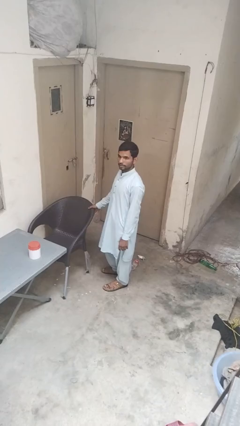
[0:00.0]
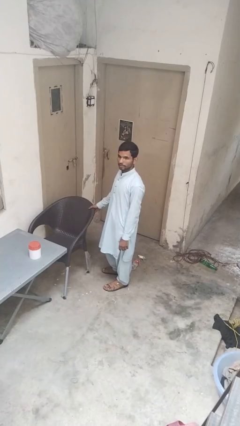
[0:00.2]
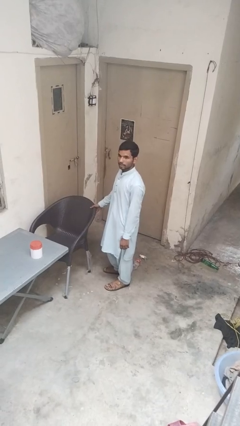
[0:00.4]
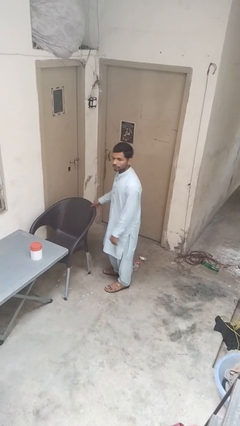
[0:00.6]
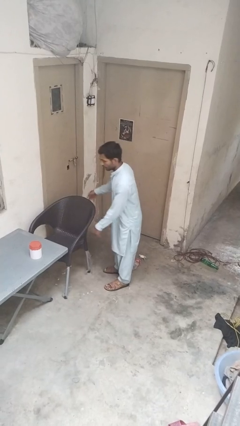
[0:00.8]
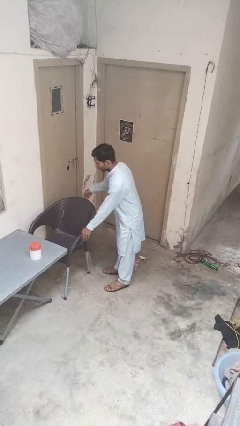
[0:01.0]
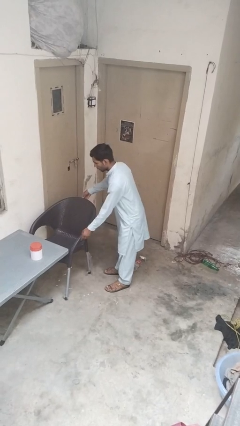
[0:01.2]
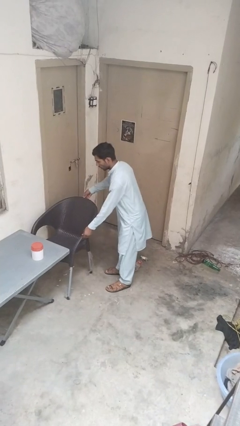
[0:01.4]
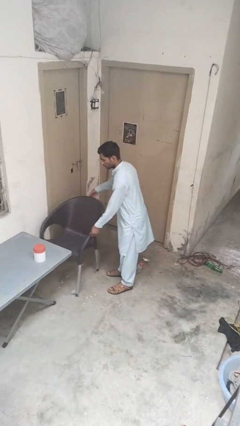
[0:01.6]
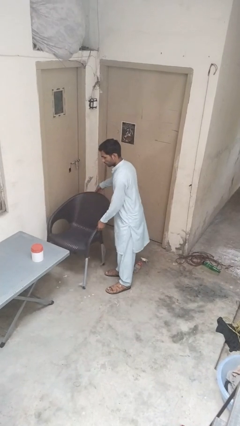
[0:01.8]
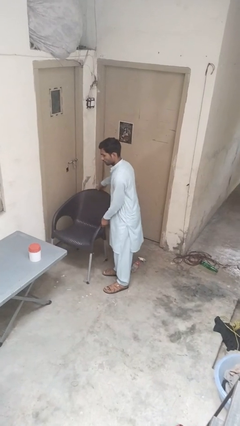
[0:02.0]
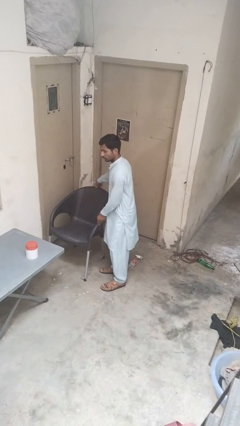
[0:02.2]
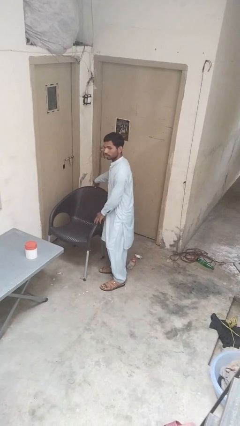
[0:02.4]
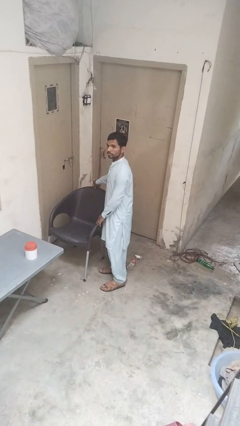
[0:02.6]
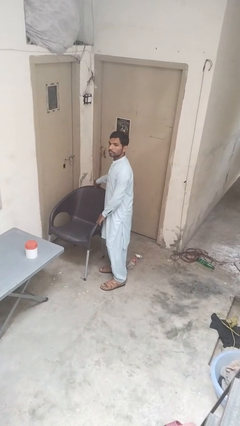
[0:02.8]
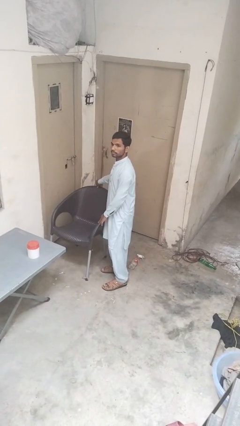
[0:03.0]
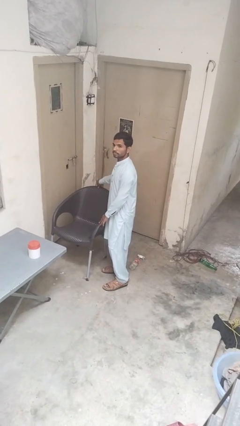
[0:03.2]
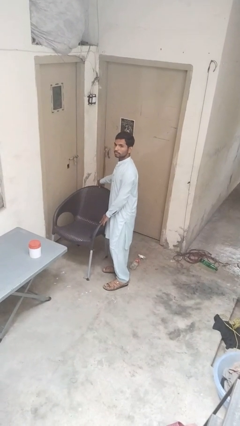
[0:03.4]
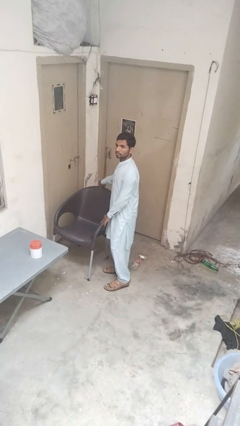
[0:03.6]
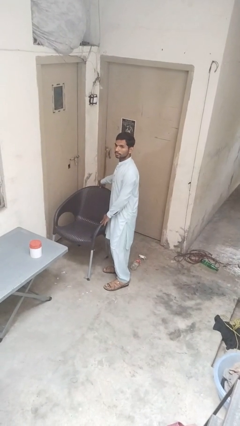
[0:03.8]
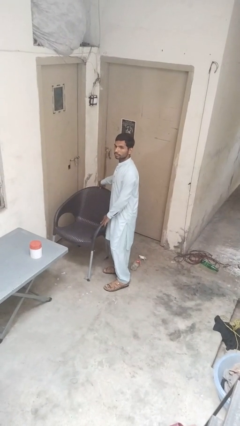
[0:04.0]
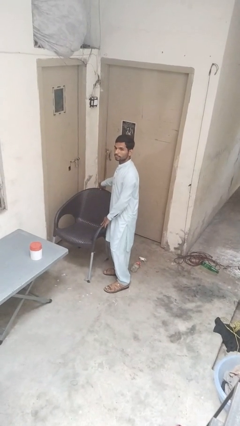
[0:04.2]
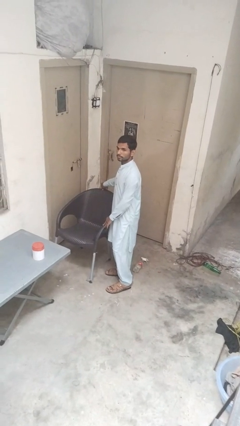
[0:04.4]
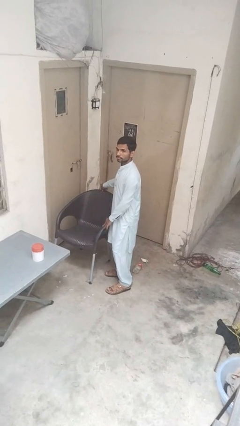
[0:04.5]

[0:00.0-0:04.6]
person pulls out chair

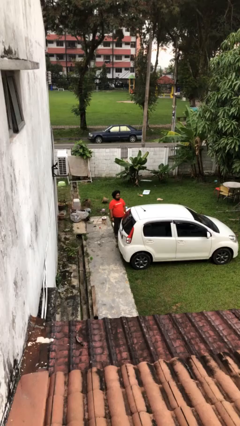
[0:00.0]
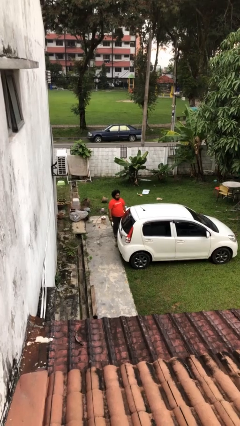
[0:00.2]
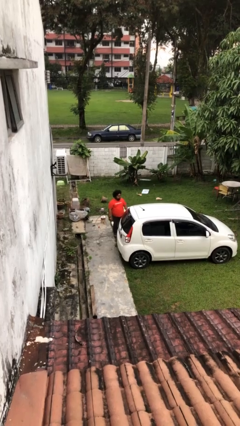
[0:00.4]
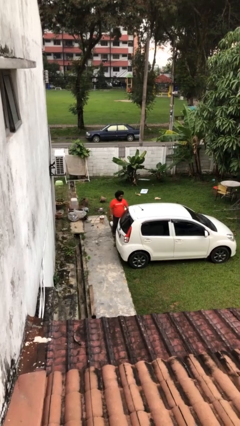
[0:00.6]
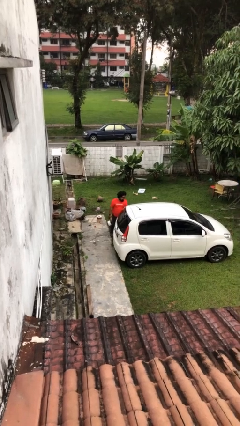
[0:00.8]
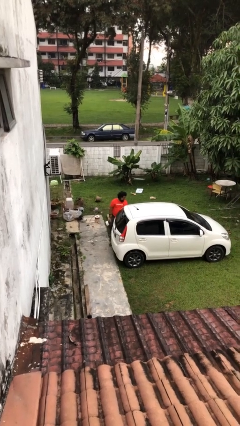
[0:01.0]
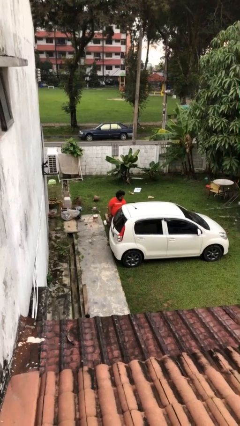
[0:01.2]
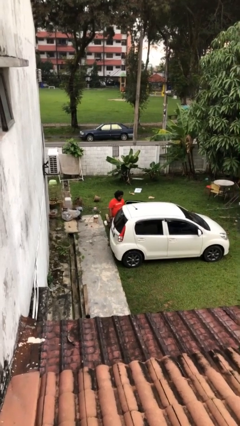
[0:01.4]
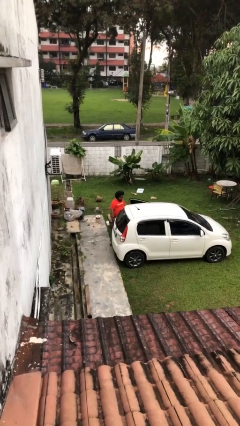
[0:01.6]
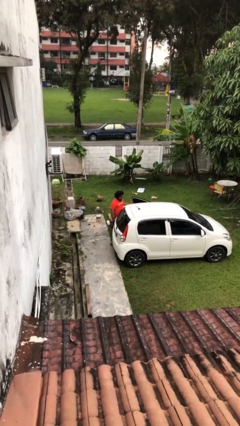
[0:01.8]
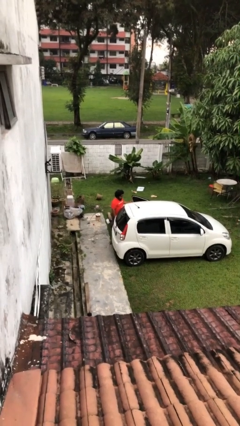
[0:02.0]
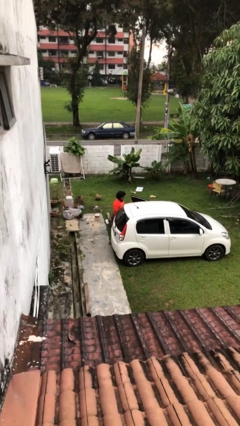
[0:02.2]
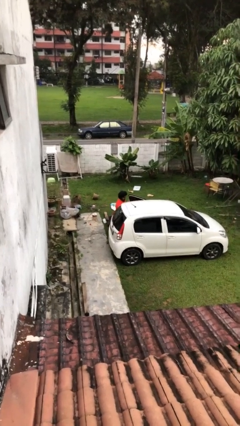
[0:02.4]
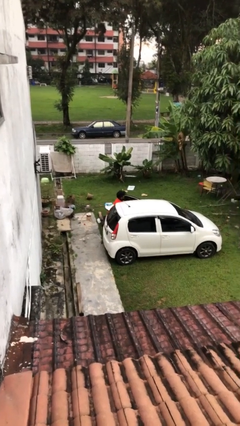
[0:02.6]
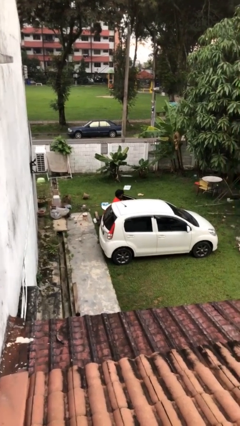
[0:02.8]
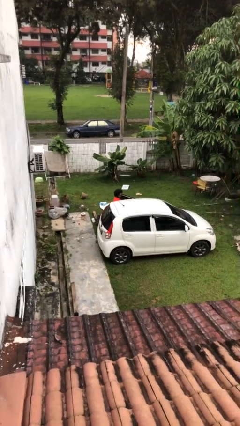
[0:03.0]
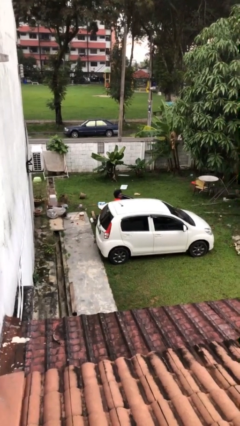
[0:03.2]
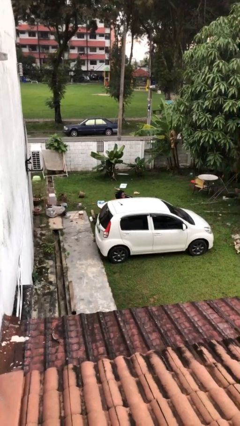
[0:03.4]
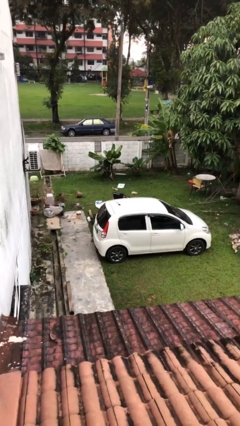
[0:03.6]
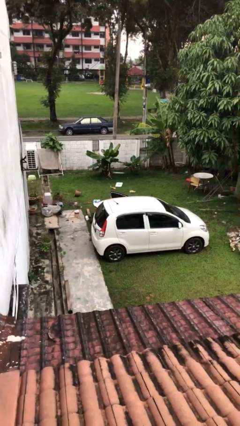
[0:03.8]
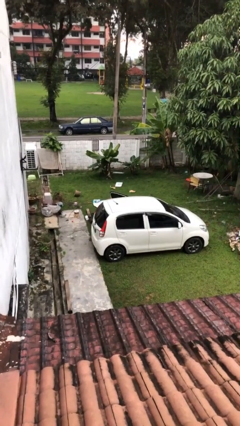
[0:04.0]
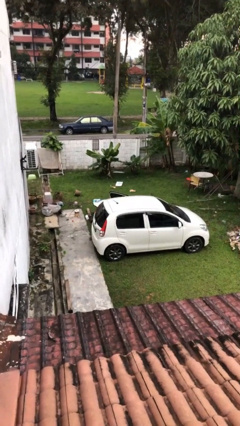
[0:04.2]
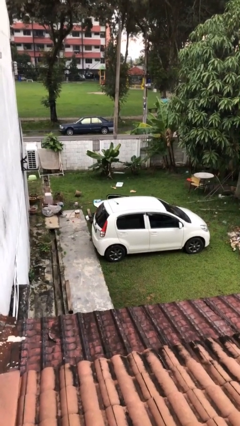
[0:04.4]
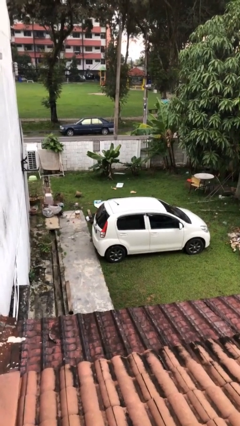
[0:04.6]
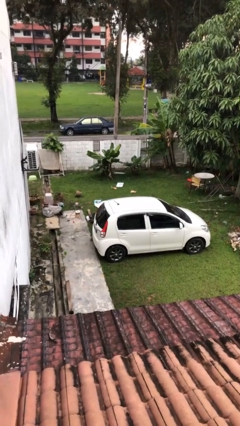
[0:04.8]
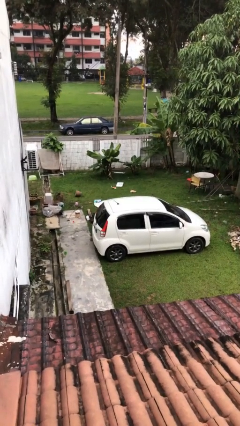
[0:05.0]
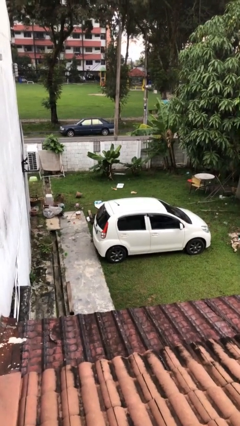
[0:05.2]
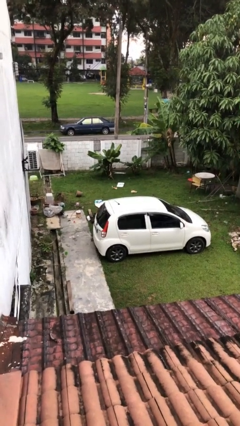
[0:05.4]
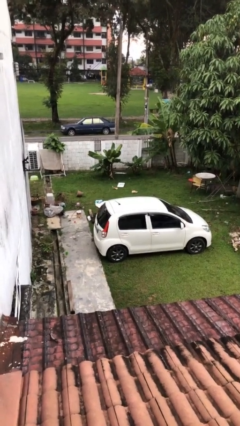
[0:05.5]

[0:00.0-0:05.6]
car picks up person

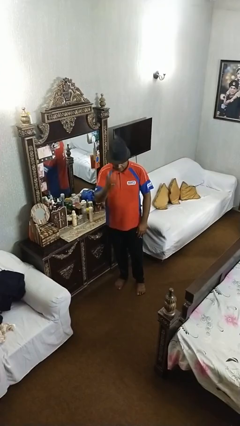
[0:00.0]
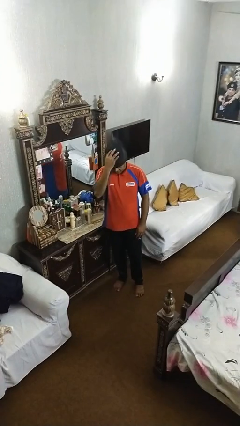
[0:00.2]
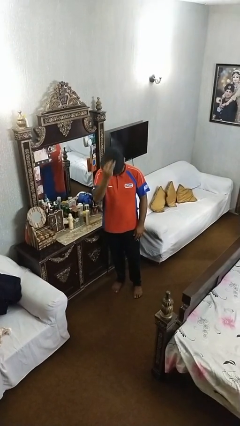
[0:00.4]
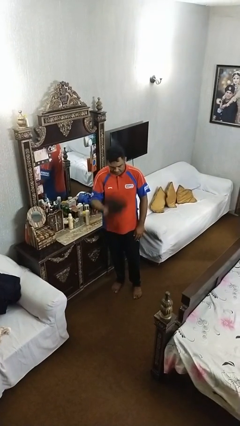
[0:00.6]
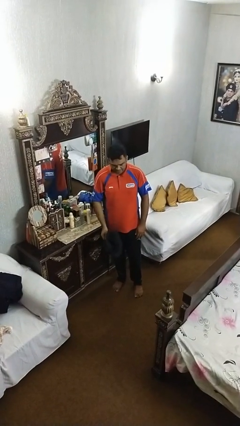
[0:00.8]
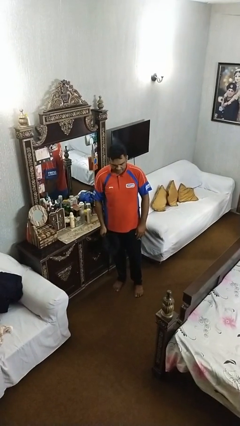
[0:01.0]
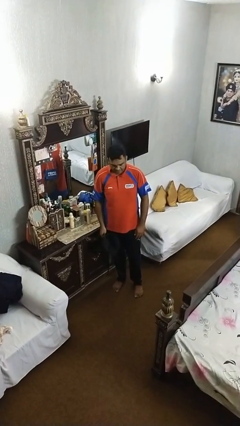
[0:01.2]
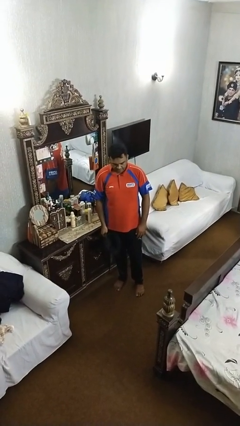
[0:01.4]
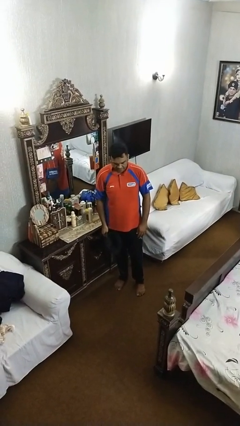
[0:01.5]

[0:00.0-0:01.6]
person takes off hat

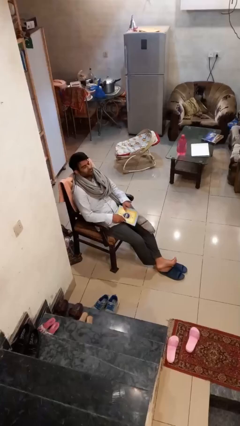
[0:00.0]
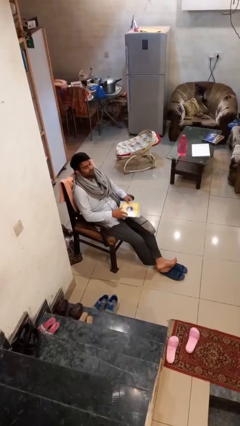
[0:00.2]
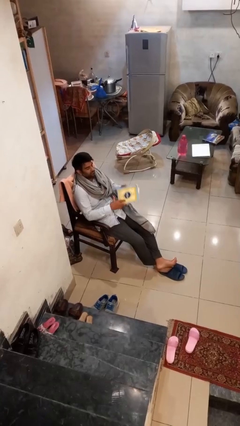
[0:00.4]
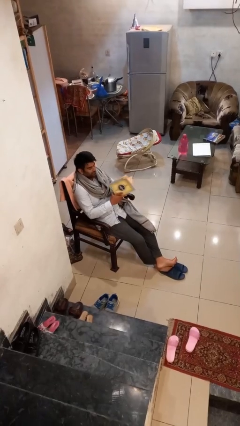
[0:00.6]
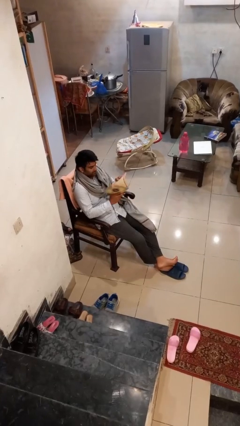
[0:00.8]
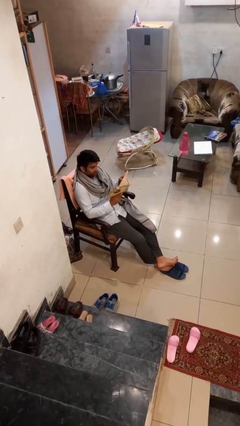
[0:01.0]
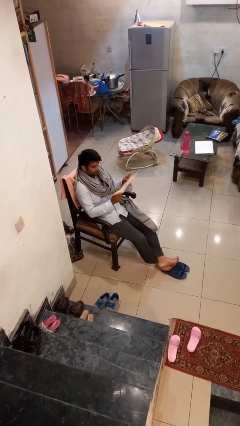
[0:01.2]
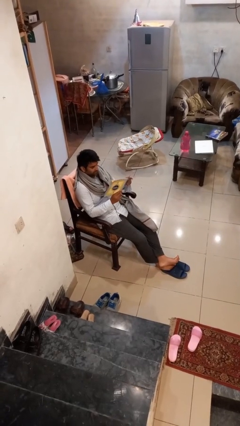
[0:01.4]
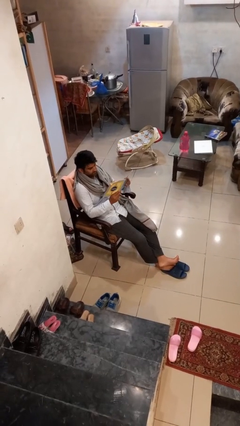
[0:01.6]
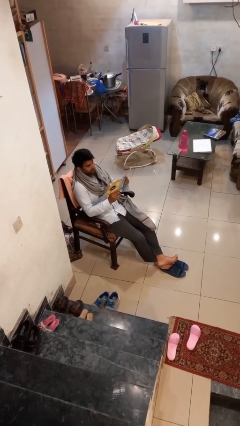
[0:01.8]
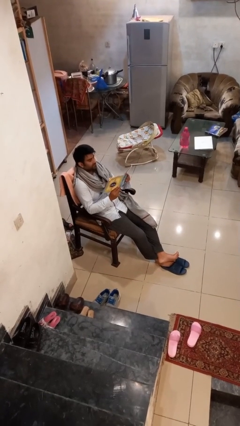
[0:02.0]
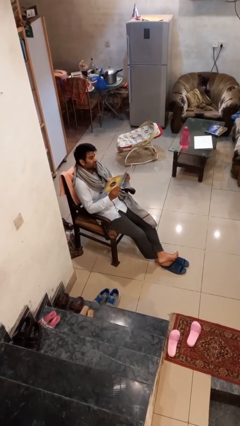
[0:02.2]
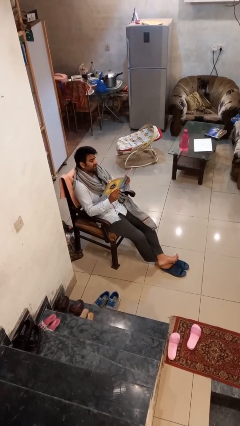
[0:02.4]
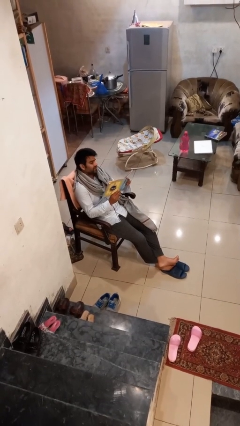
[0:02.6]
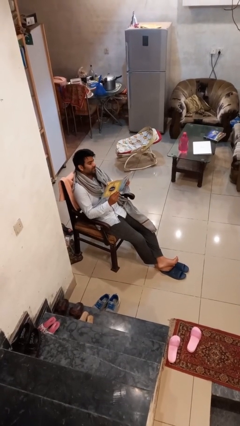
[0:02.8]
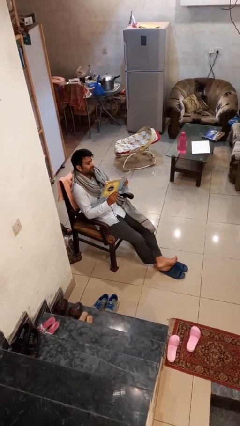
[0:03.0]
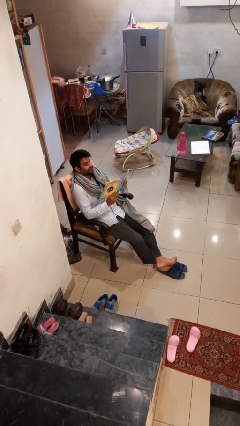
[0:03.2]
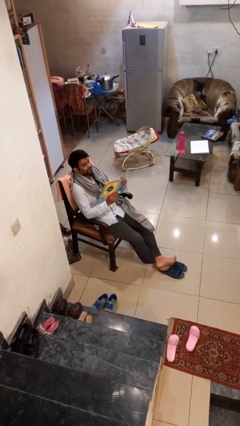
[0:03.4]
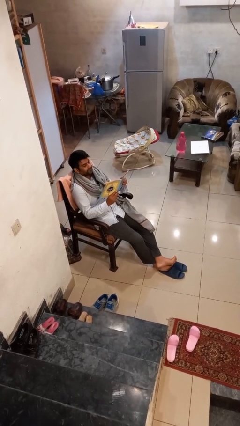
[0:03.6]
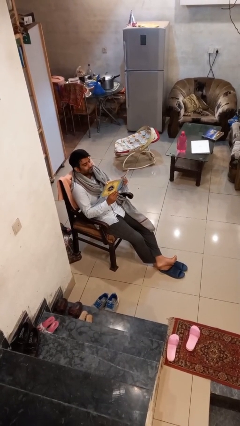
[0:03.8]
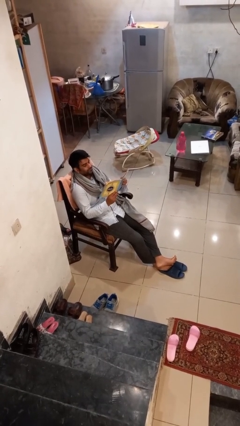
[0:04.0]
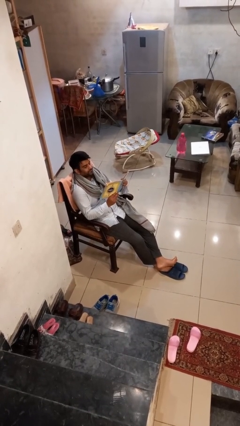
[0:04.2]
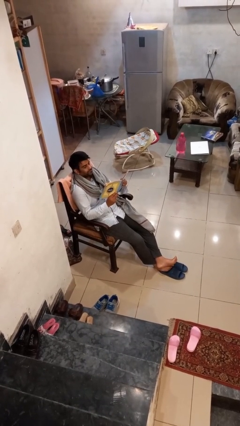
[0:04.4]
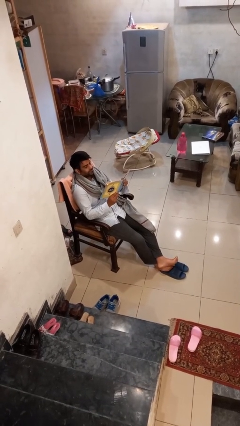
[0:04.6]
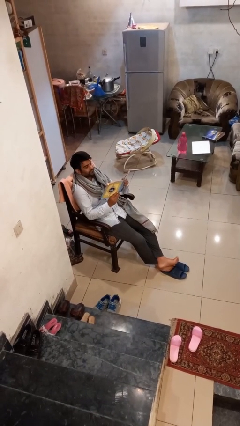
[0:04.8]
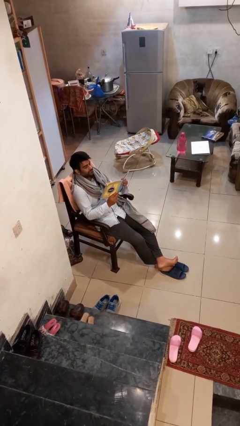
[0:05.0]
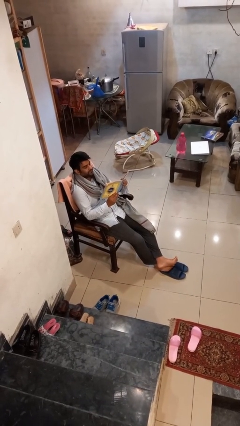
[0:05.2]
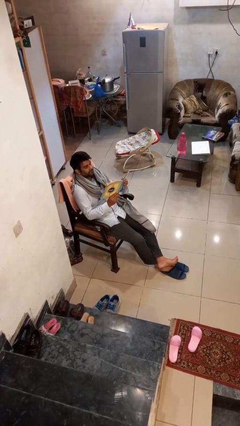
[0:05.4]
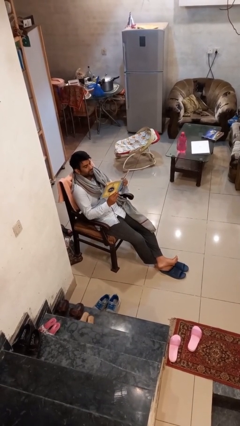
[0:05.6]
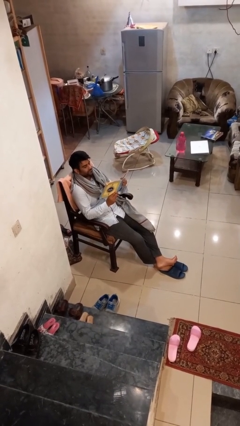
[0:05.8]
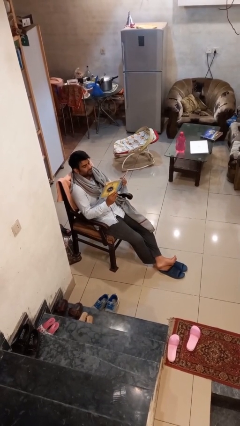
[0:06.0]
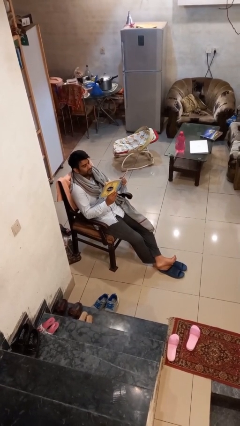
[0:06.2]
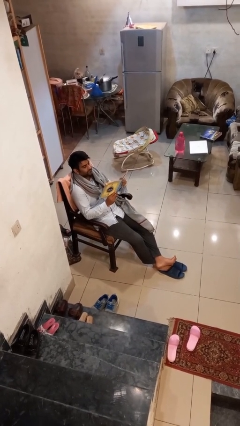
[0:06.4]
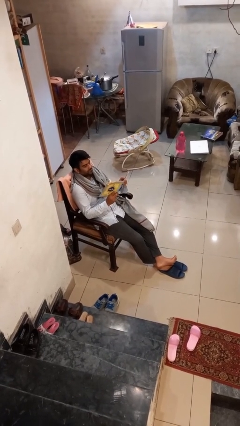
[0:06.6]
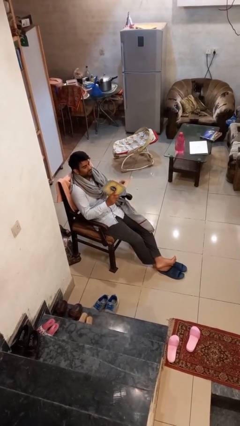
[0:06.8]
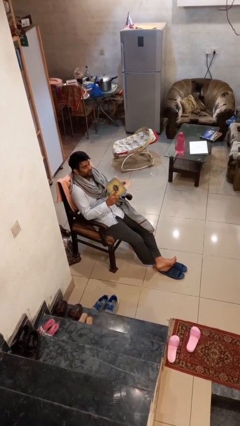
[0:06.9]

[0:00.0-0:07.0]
person reads document
